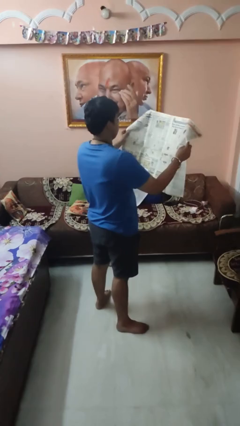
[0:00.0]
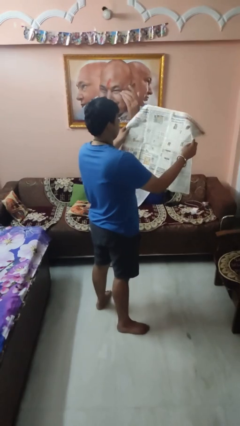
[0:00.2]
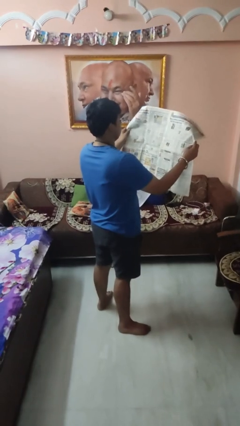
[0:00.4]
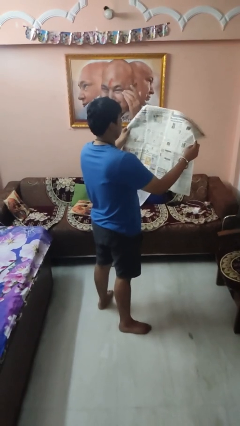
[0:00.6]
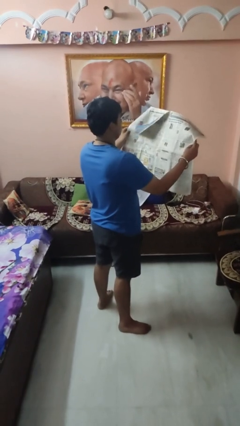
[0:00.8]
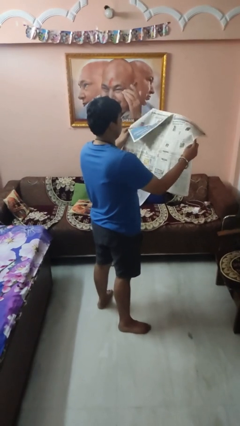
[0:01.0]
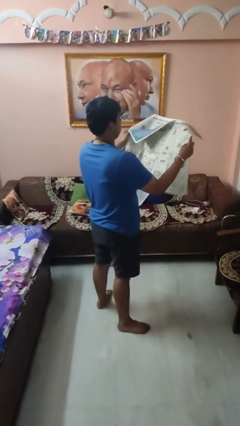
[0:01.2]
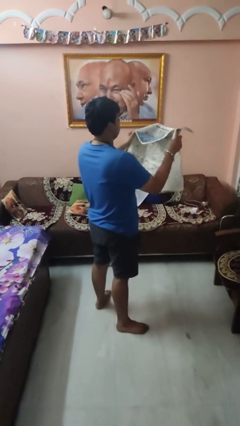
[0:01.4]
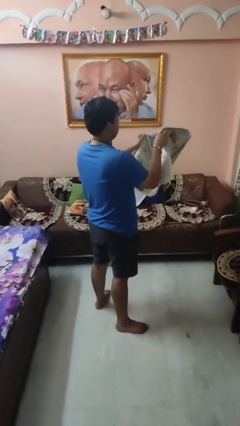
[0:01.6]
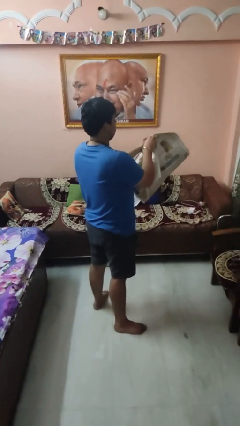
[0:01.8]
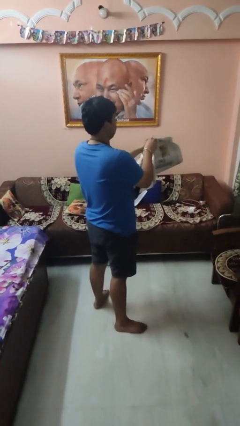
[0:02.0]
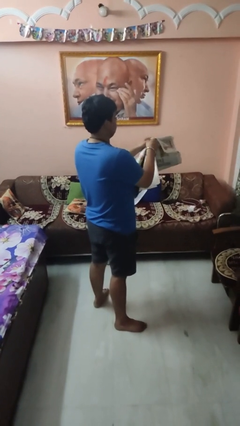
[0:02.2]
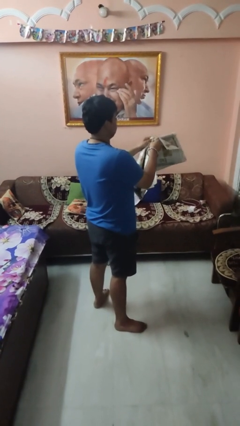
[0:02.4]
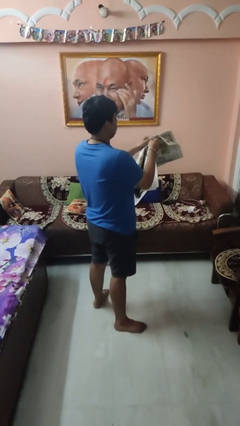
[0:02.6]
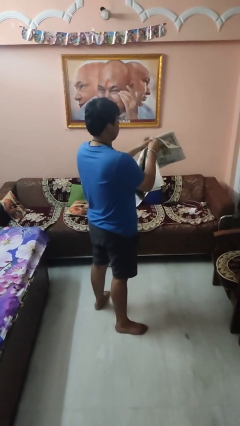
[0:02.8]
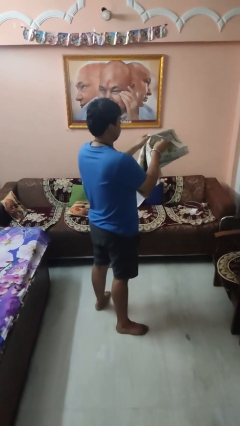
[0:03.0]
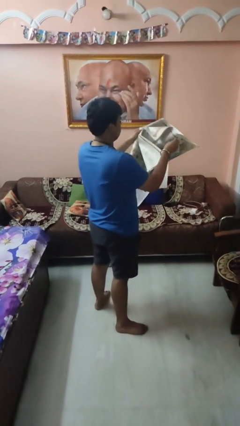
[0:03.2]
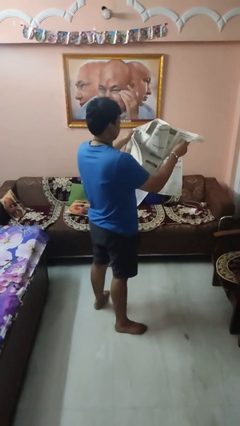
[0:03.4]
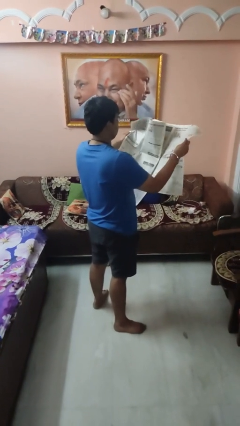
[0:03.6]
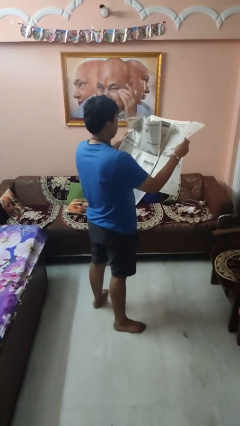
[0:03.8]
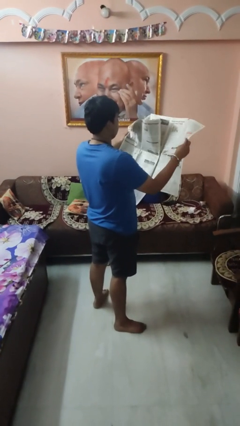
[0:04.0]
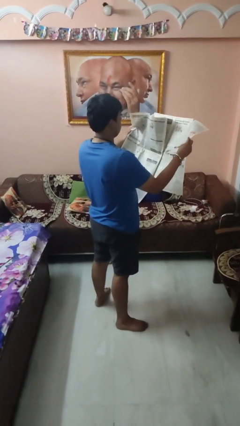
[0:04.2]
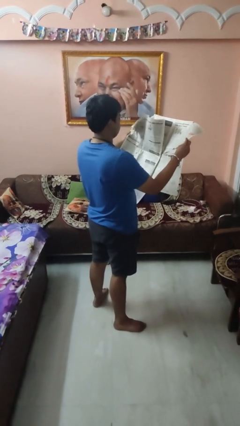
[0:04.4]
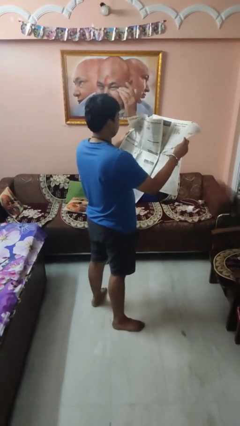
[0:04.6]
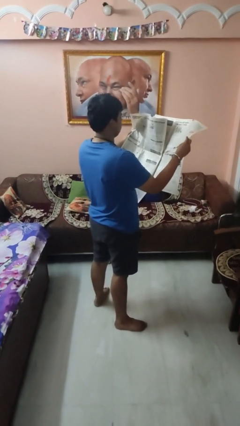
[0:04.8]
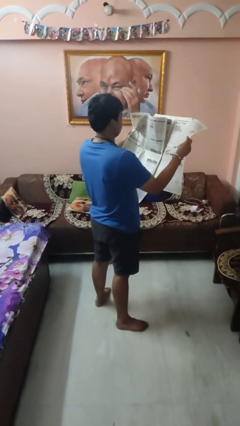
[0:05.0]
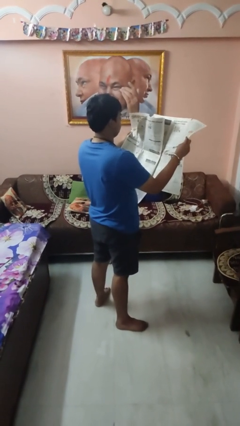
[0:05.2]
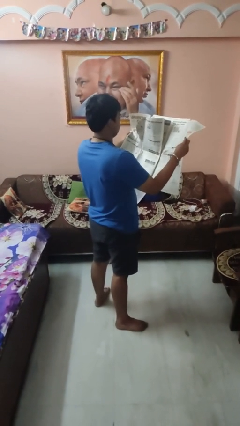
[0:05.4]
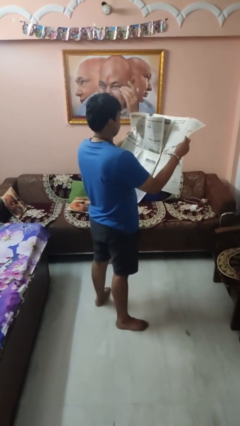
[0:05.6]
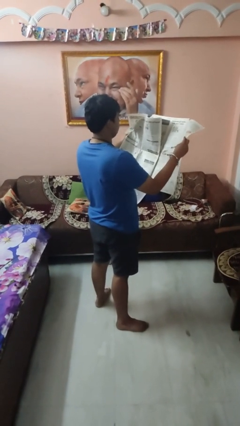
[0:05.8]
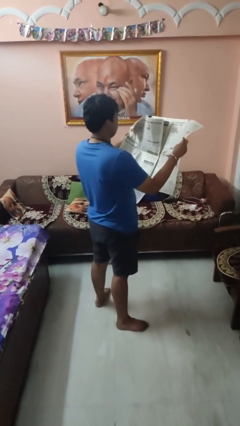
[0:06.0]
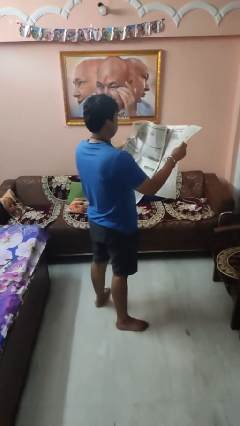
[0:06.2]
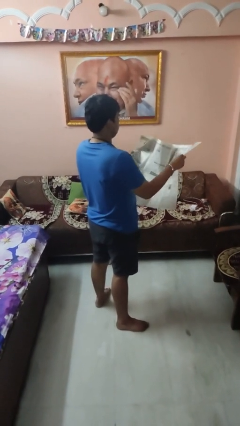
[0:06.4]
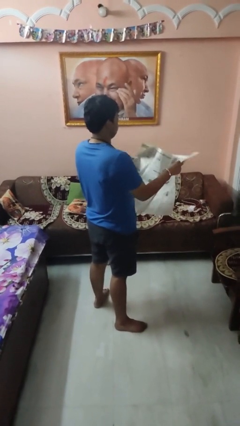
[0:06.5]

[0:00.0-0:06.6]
person reads newspaper

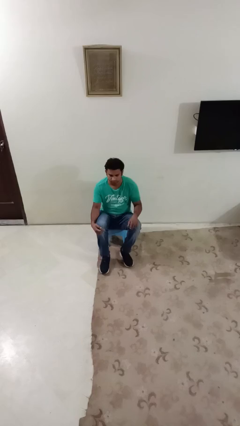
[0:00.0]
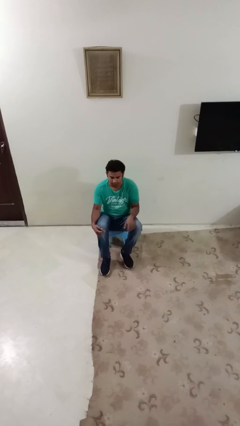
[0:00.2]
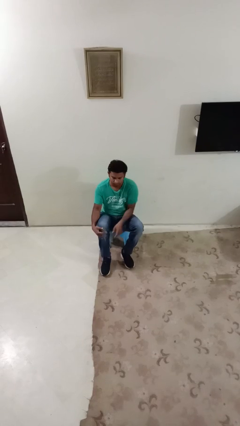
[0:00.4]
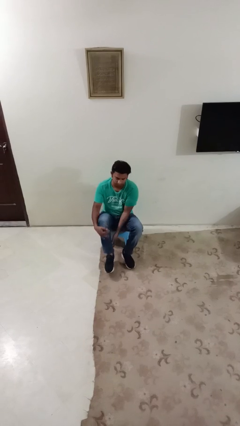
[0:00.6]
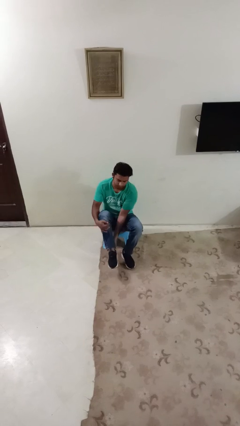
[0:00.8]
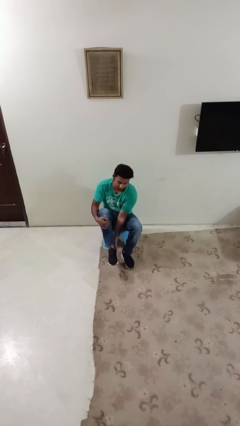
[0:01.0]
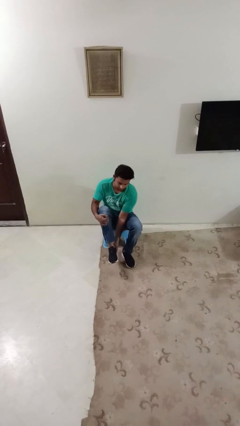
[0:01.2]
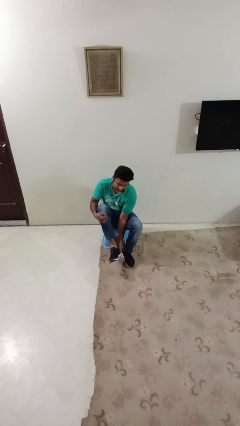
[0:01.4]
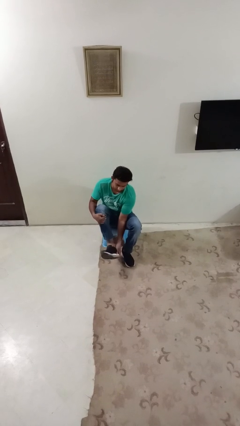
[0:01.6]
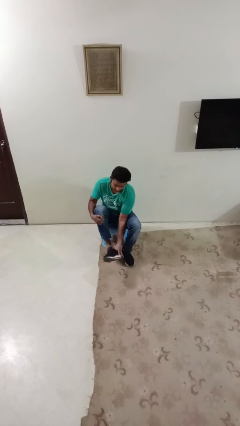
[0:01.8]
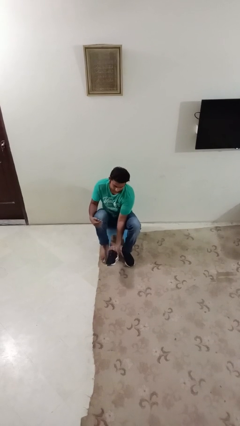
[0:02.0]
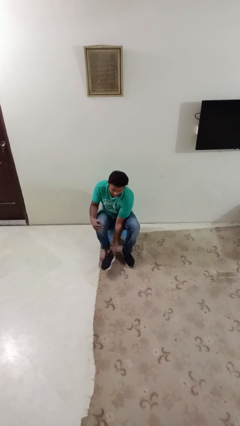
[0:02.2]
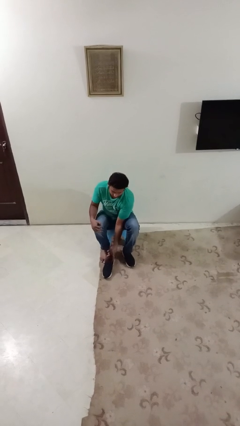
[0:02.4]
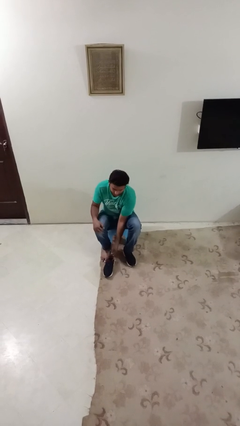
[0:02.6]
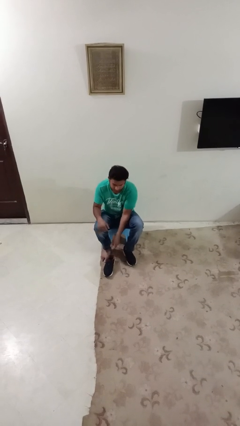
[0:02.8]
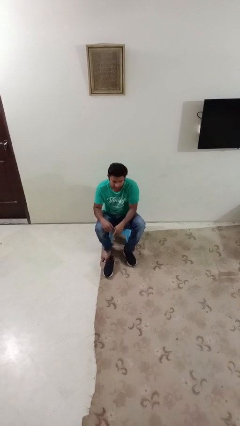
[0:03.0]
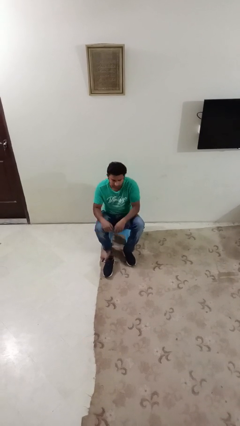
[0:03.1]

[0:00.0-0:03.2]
person takes off shoes

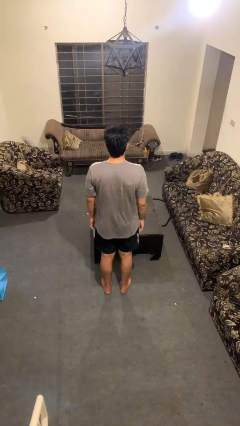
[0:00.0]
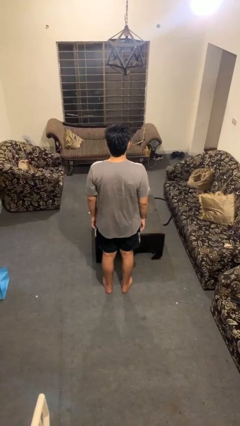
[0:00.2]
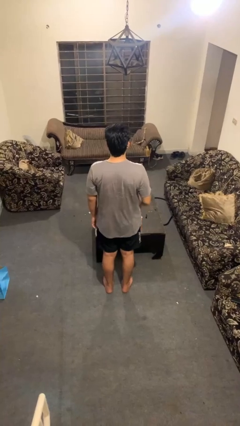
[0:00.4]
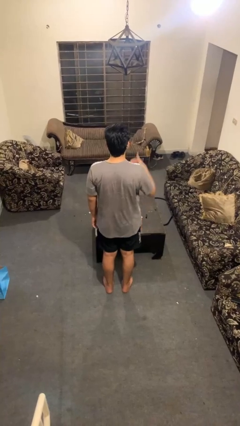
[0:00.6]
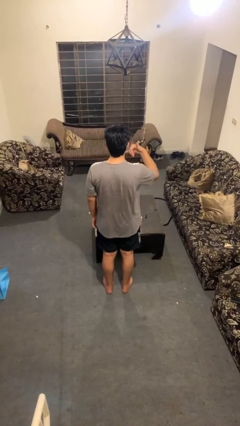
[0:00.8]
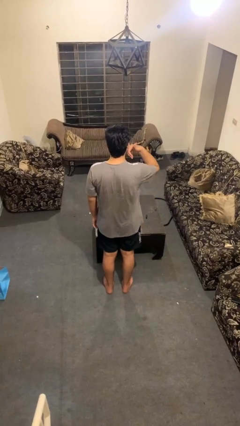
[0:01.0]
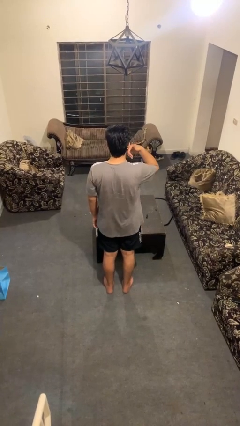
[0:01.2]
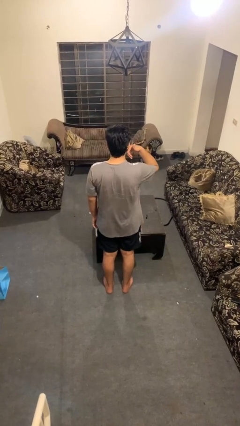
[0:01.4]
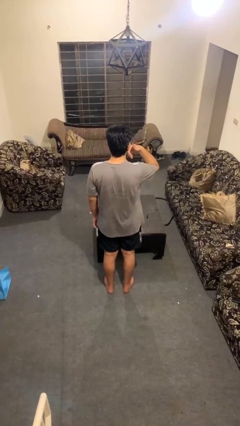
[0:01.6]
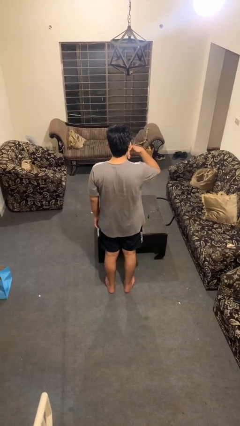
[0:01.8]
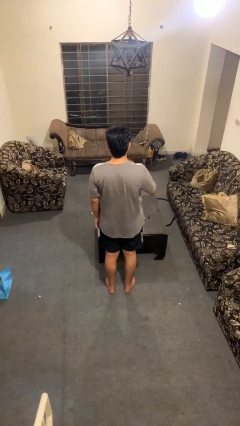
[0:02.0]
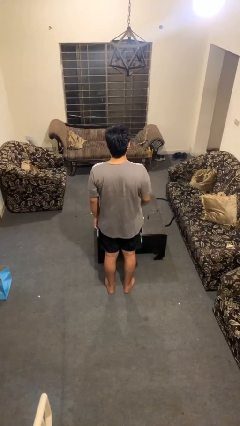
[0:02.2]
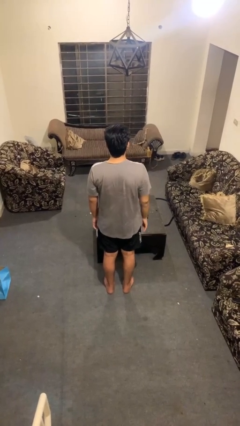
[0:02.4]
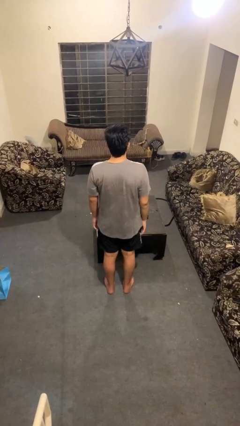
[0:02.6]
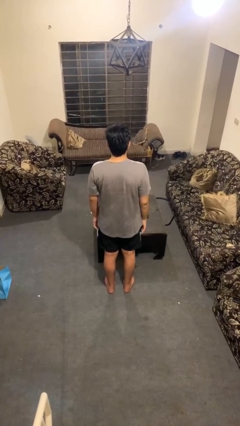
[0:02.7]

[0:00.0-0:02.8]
person gestures call me

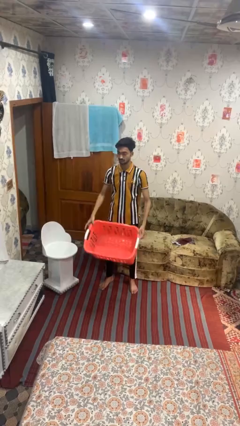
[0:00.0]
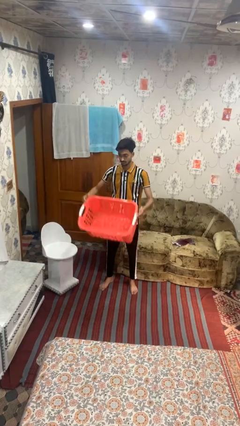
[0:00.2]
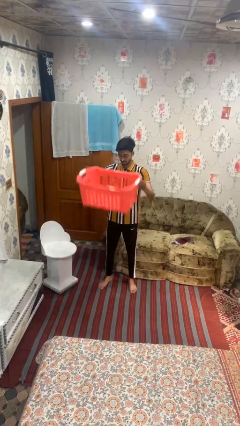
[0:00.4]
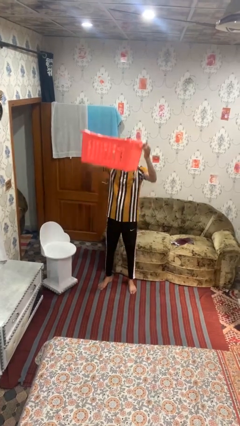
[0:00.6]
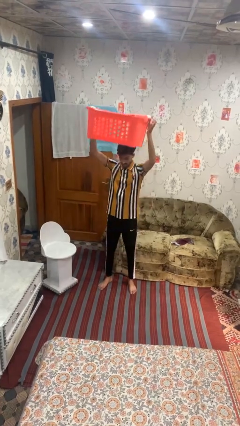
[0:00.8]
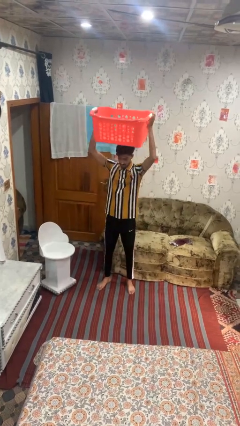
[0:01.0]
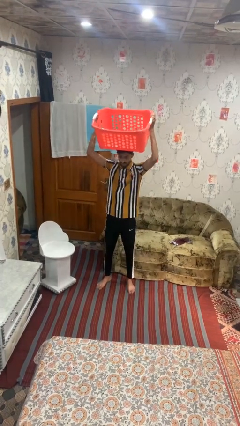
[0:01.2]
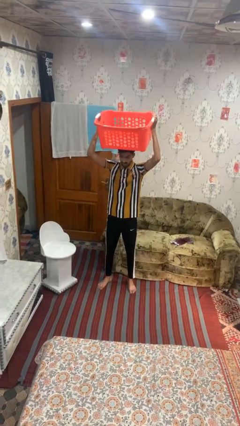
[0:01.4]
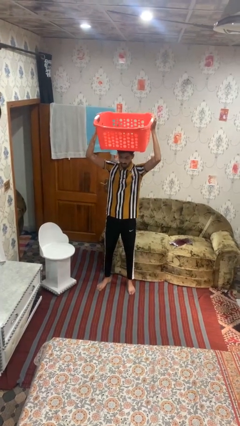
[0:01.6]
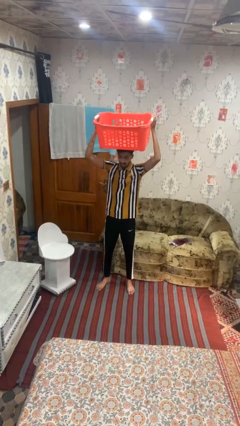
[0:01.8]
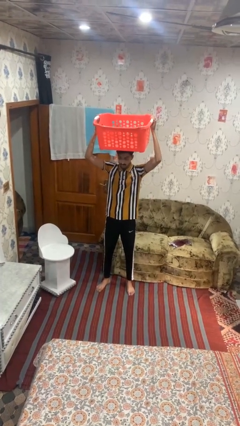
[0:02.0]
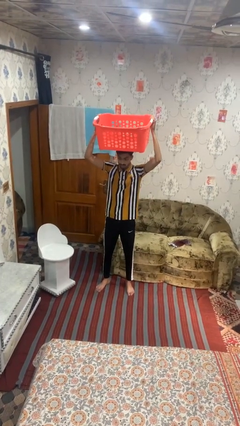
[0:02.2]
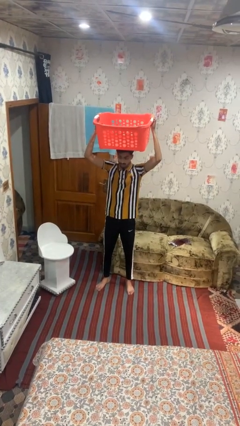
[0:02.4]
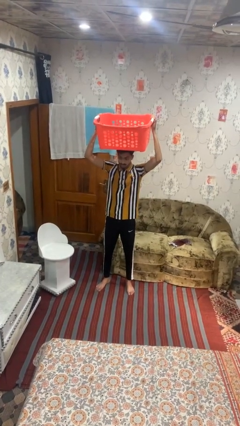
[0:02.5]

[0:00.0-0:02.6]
person holds object above head

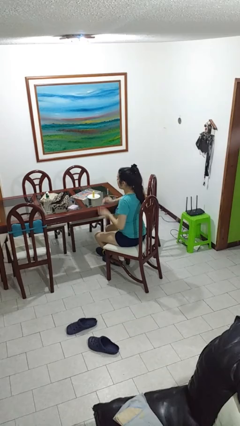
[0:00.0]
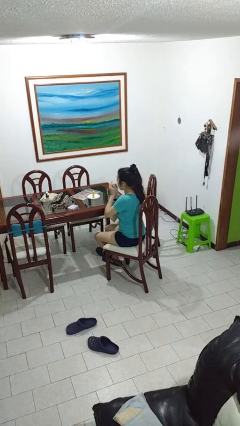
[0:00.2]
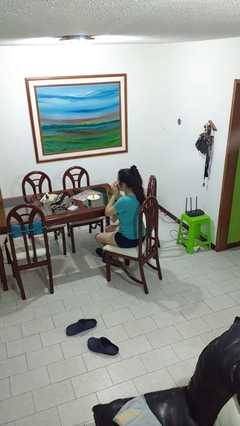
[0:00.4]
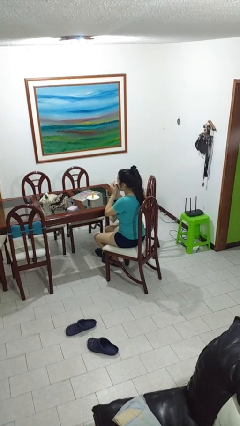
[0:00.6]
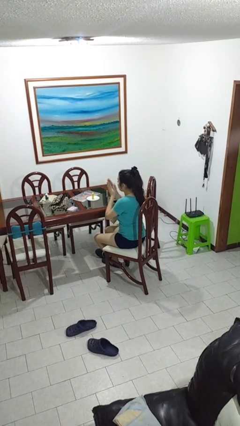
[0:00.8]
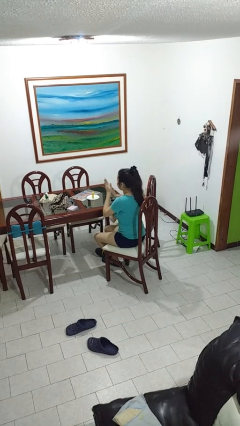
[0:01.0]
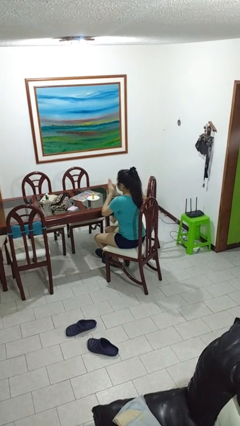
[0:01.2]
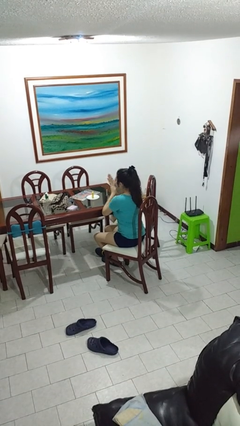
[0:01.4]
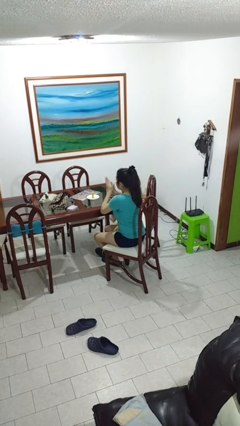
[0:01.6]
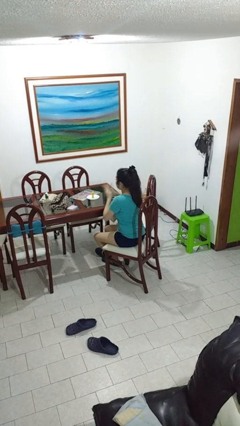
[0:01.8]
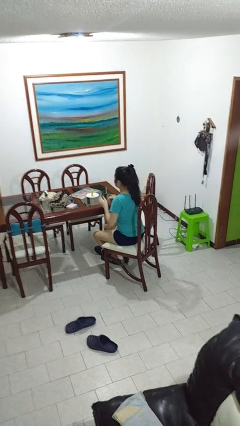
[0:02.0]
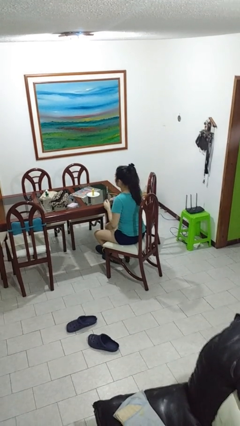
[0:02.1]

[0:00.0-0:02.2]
person blows into hands

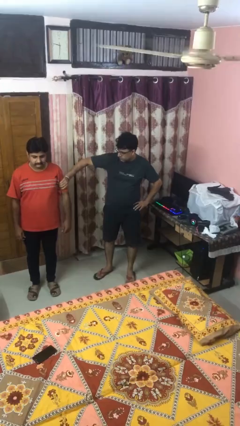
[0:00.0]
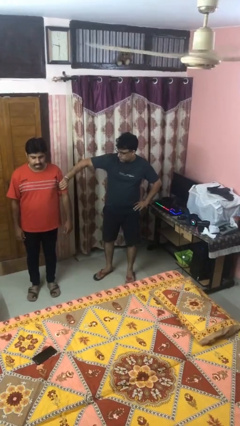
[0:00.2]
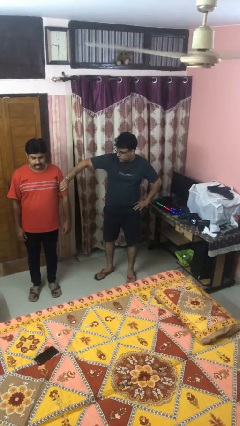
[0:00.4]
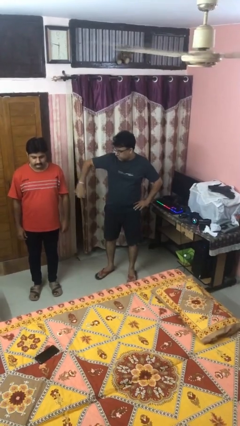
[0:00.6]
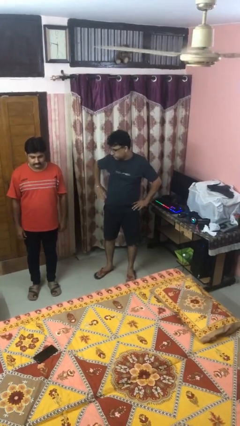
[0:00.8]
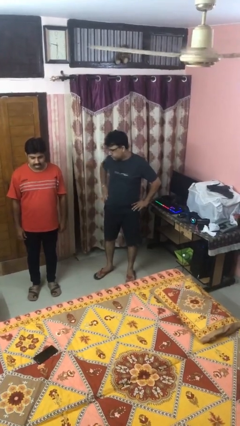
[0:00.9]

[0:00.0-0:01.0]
person grabs person by bicep
